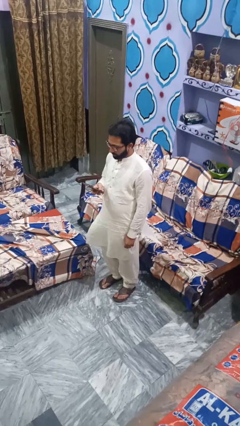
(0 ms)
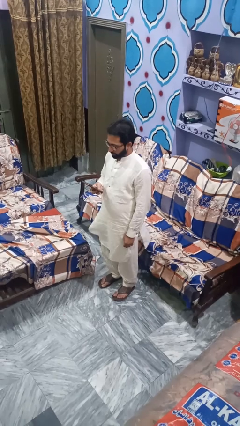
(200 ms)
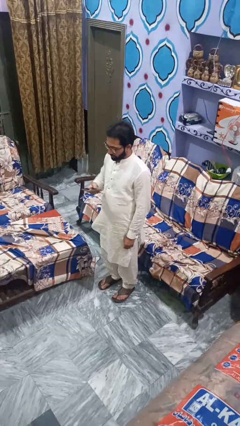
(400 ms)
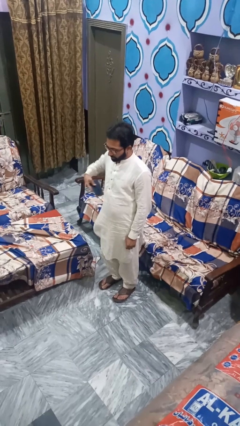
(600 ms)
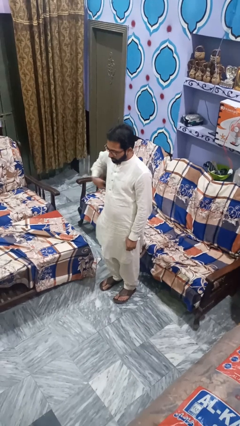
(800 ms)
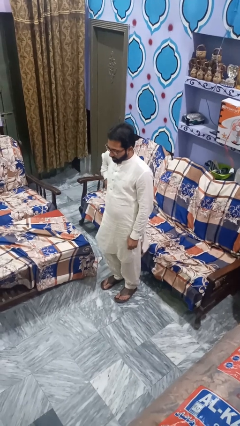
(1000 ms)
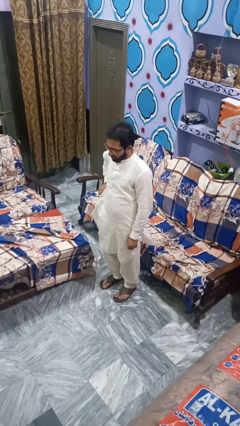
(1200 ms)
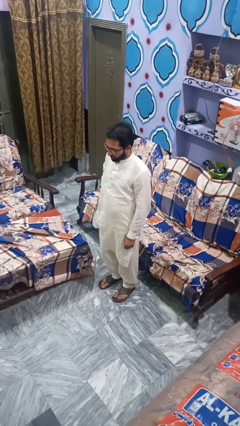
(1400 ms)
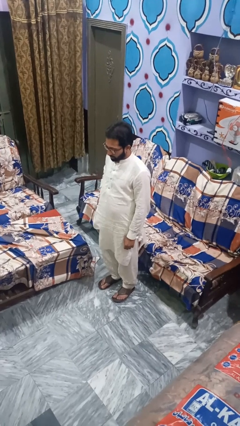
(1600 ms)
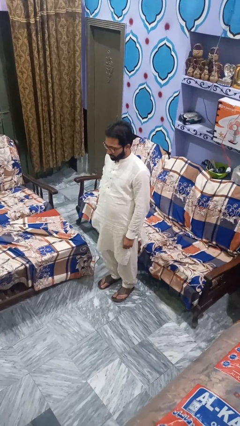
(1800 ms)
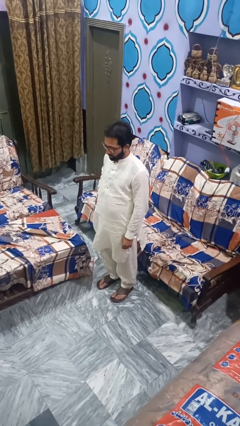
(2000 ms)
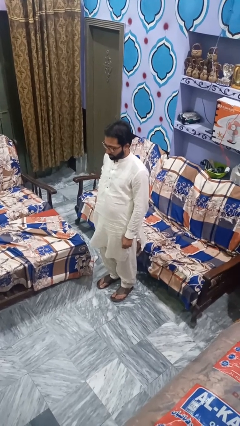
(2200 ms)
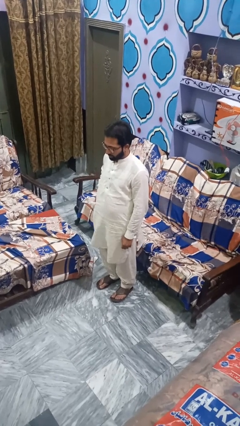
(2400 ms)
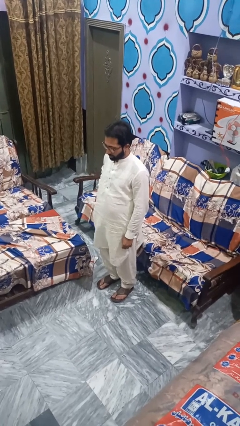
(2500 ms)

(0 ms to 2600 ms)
person puts phone into pocket

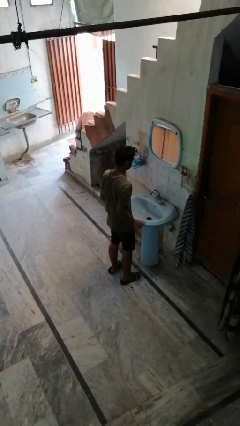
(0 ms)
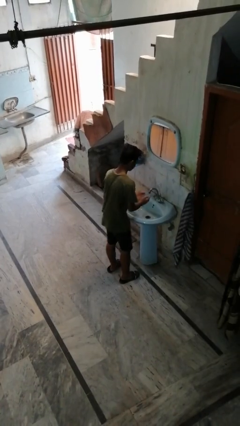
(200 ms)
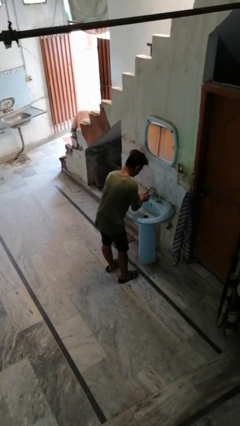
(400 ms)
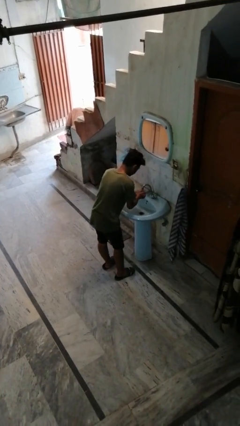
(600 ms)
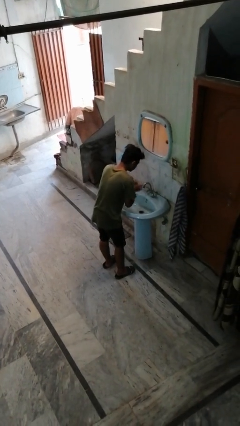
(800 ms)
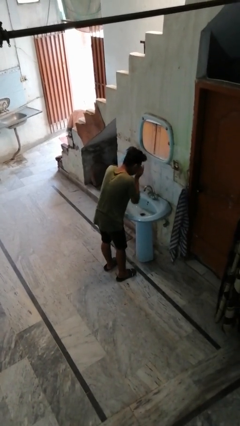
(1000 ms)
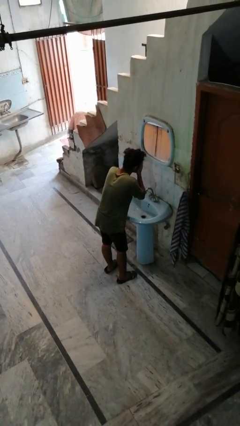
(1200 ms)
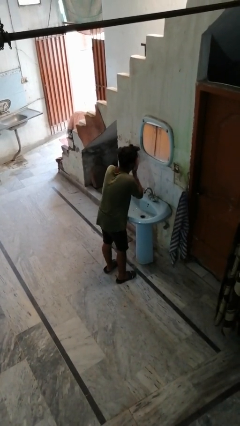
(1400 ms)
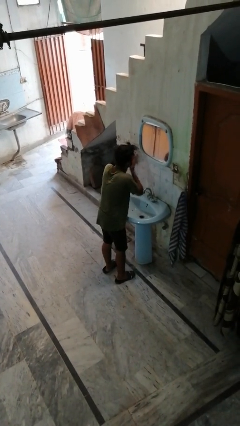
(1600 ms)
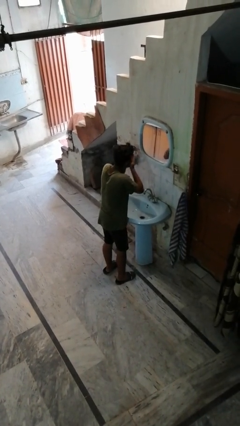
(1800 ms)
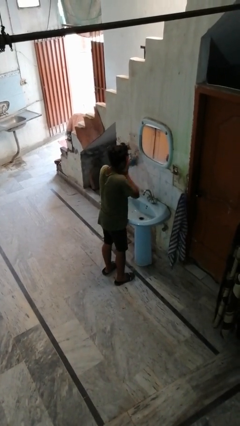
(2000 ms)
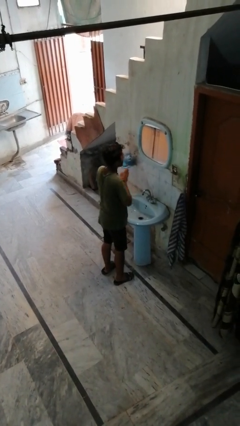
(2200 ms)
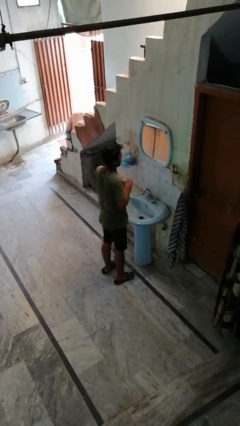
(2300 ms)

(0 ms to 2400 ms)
person washes face

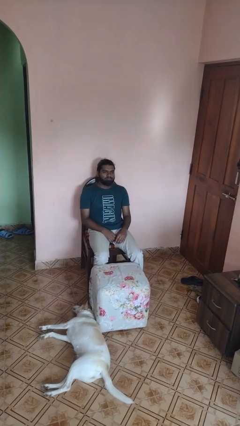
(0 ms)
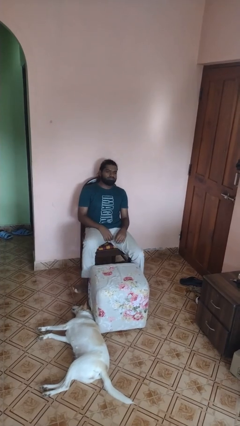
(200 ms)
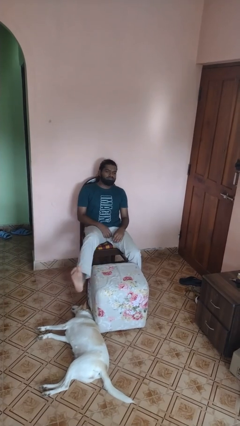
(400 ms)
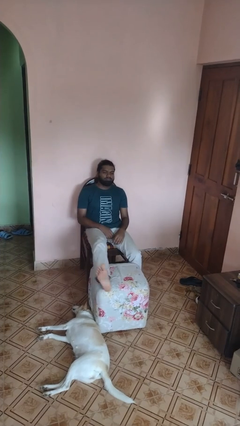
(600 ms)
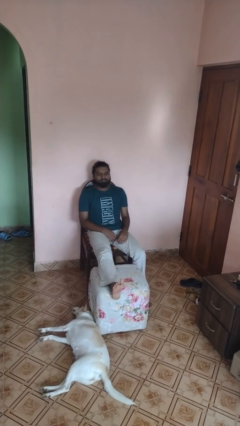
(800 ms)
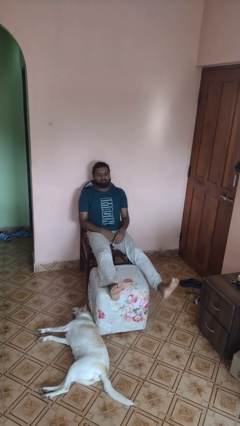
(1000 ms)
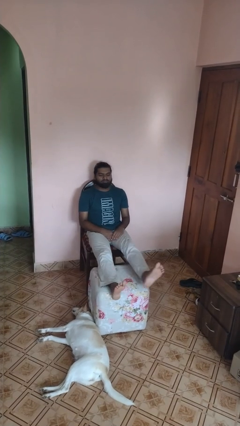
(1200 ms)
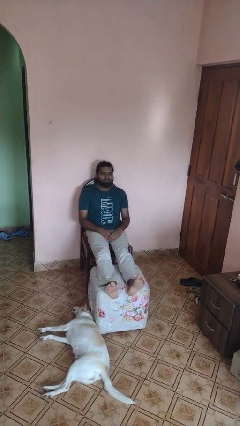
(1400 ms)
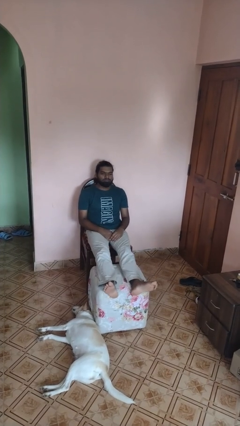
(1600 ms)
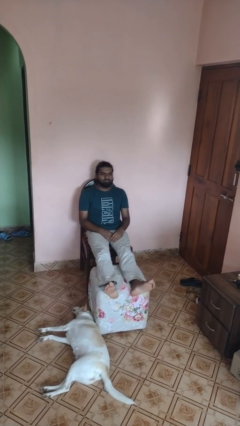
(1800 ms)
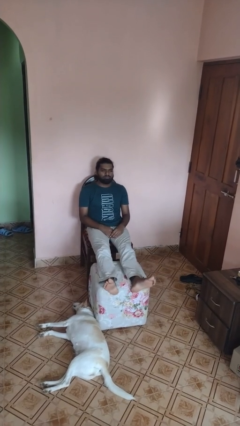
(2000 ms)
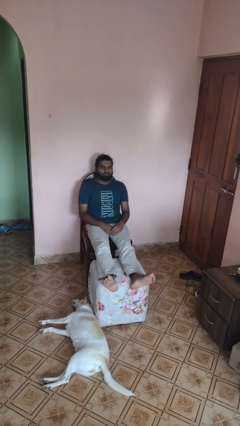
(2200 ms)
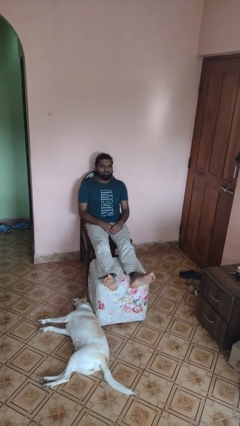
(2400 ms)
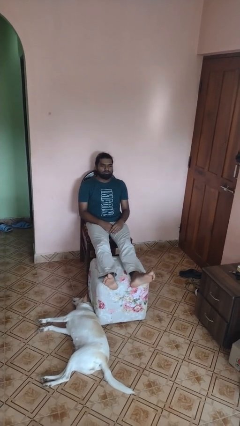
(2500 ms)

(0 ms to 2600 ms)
person puts feet up

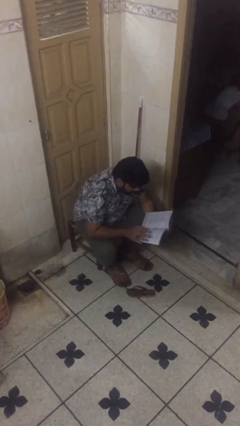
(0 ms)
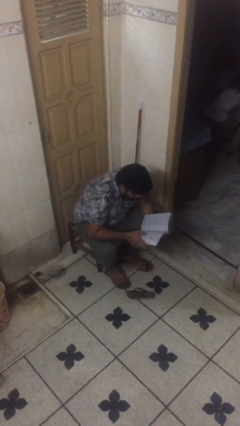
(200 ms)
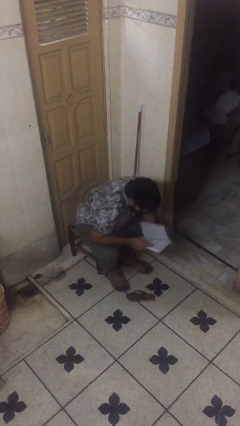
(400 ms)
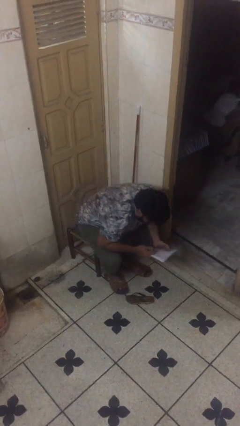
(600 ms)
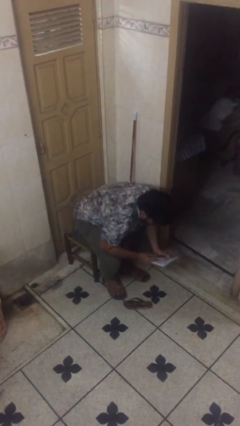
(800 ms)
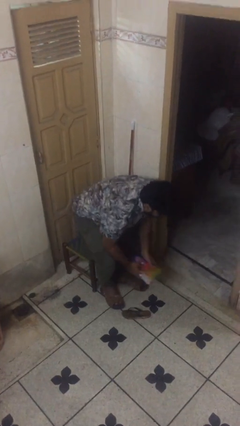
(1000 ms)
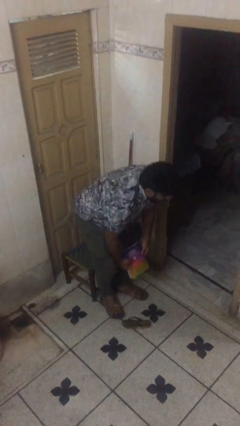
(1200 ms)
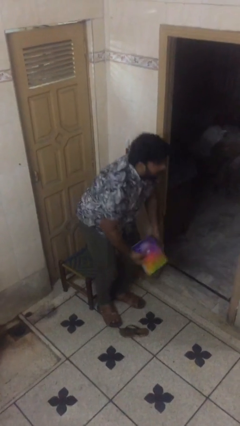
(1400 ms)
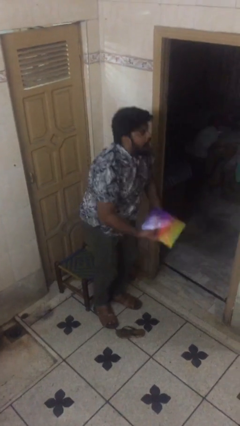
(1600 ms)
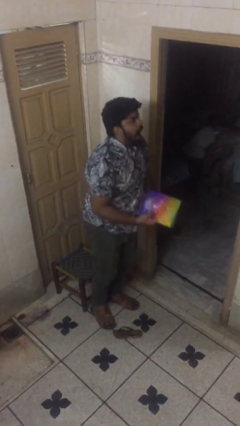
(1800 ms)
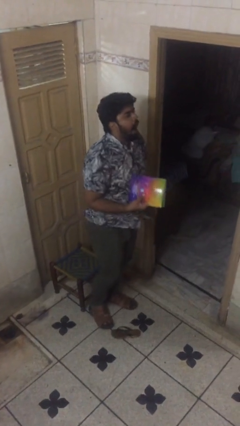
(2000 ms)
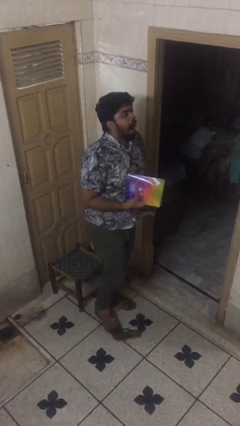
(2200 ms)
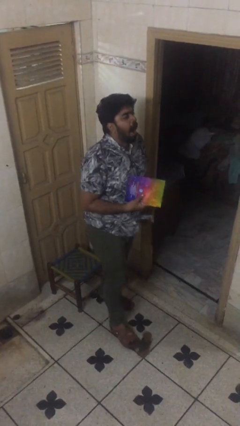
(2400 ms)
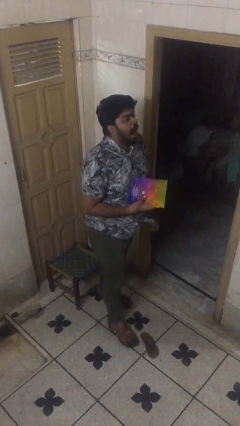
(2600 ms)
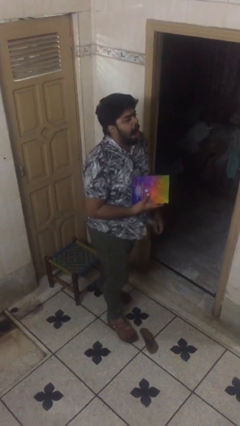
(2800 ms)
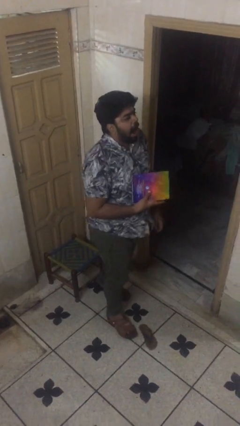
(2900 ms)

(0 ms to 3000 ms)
person stands up

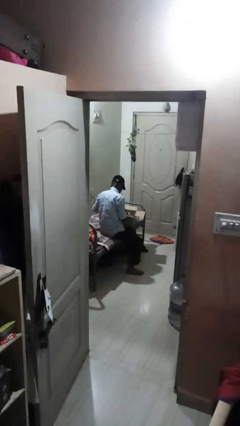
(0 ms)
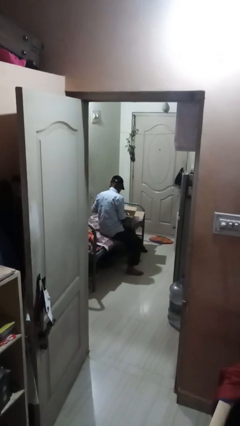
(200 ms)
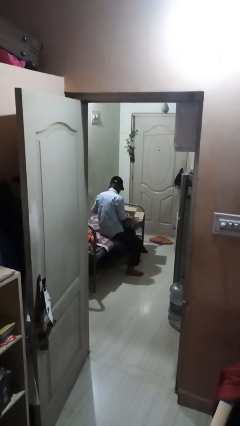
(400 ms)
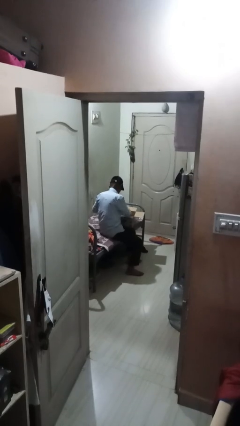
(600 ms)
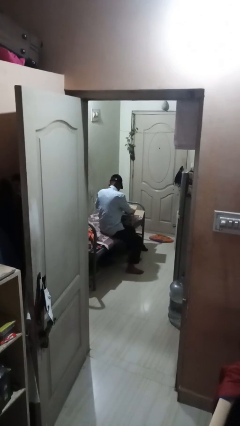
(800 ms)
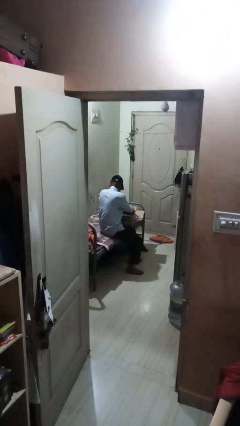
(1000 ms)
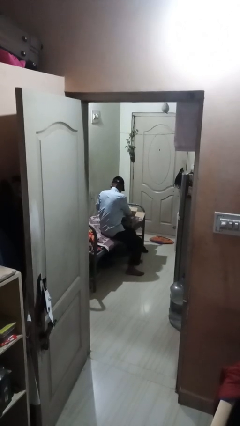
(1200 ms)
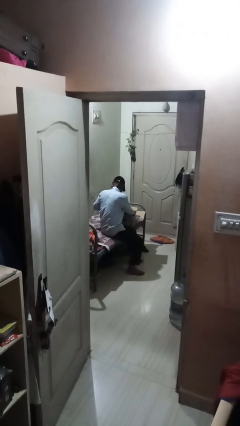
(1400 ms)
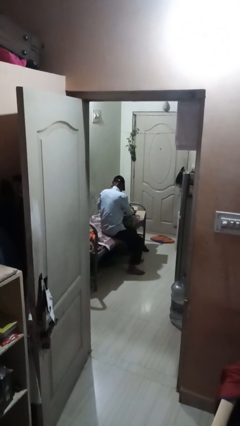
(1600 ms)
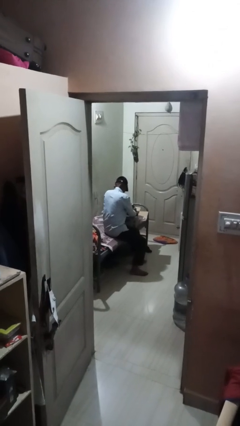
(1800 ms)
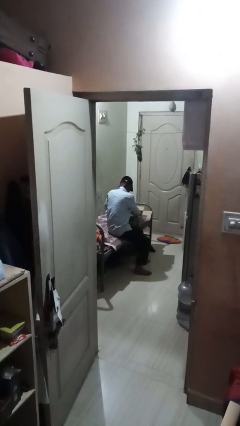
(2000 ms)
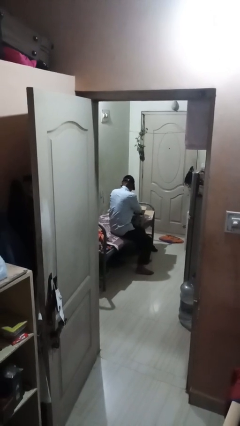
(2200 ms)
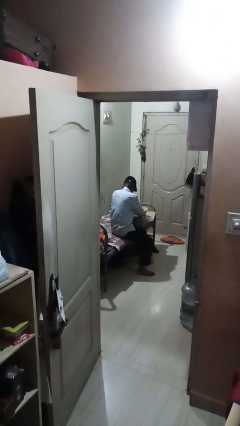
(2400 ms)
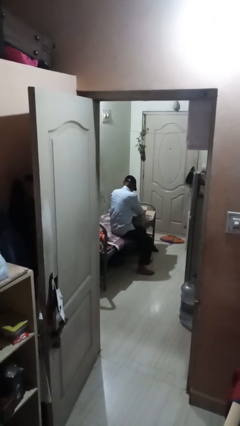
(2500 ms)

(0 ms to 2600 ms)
person searches in box

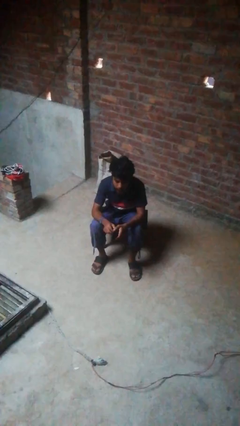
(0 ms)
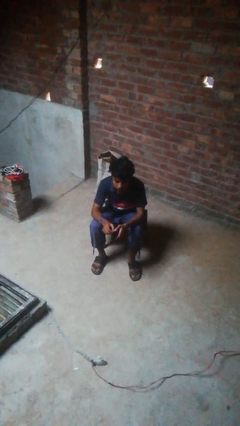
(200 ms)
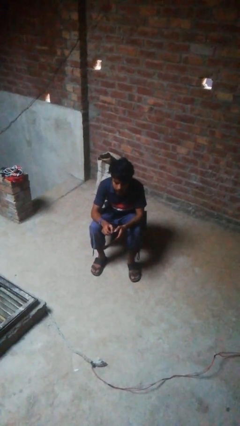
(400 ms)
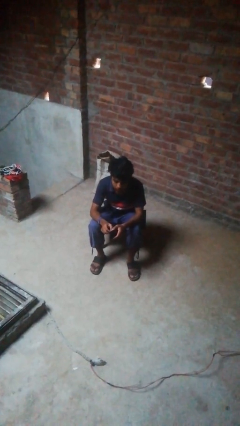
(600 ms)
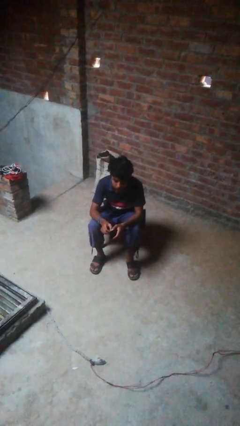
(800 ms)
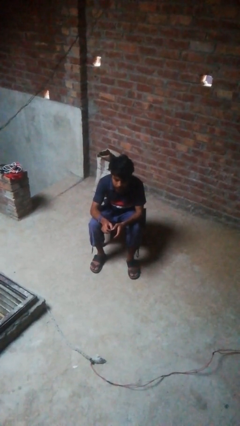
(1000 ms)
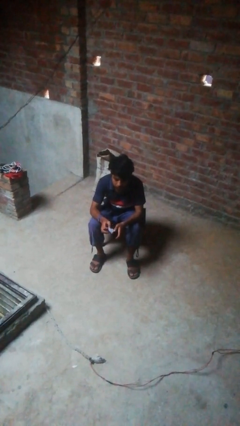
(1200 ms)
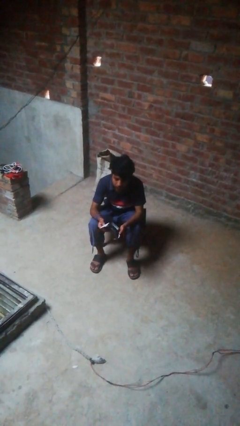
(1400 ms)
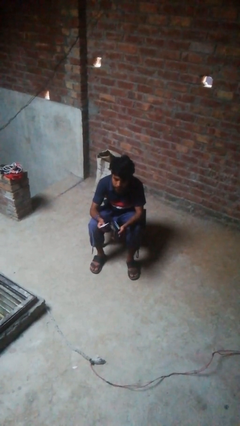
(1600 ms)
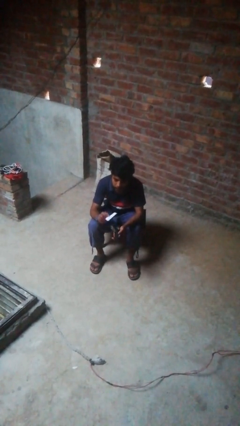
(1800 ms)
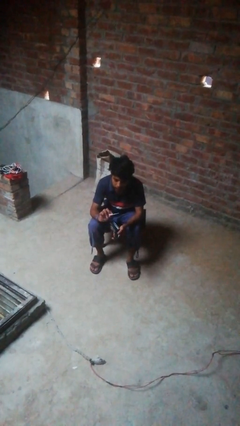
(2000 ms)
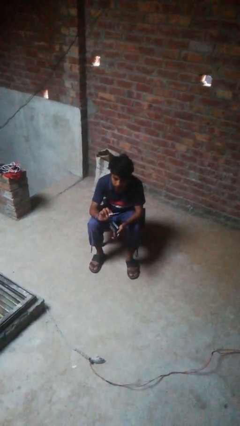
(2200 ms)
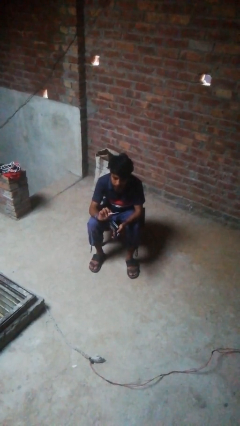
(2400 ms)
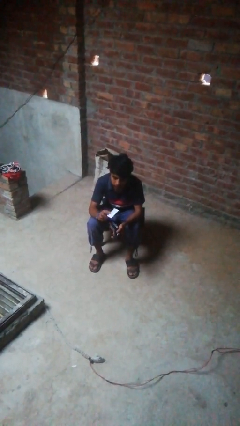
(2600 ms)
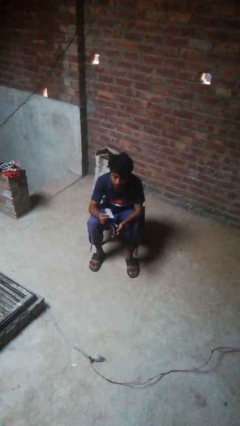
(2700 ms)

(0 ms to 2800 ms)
person takes object from purse

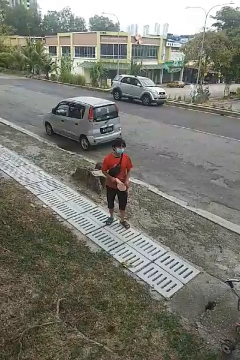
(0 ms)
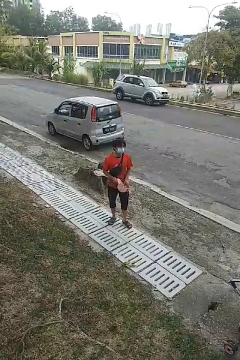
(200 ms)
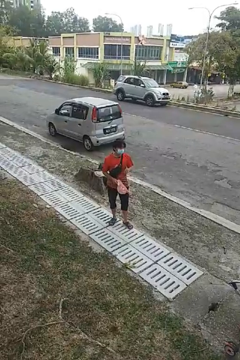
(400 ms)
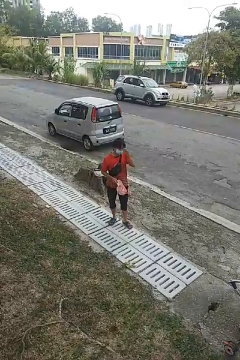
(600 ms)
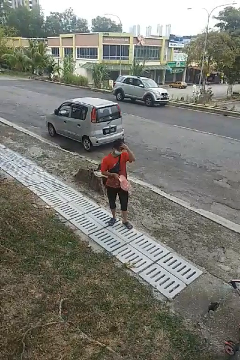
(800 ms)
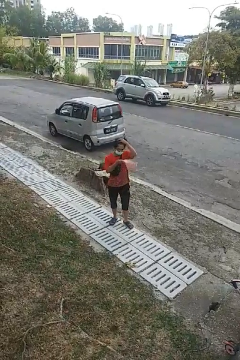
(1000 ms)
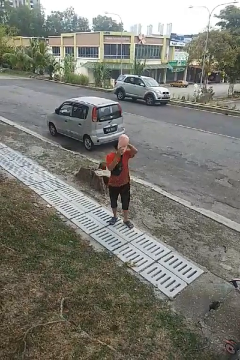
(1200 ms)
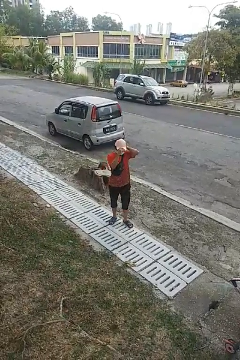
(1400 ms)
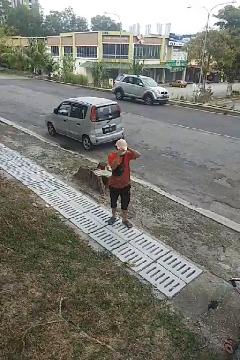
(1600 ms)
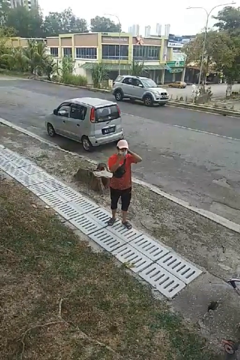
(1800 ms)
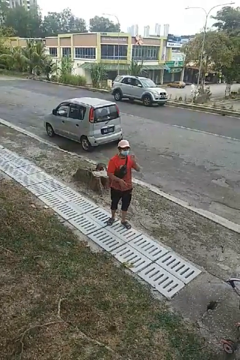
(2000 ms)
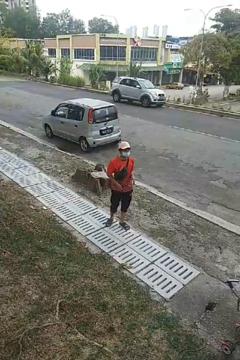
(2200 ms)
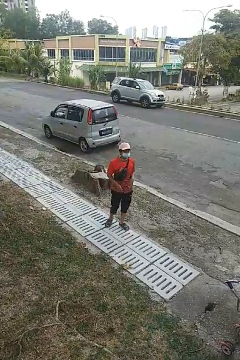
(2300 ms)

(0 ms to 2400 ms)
person puts on hat
